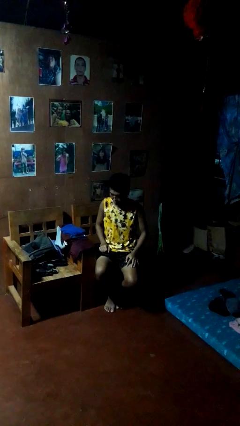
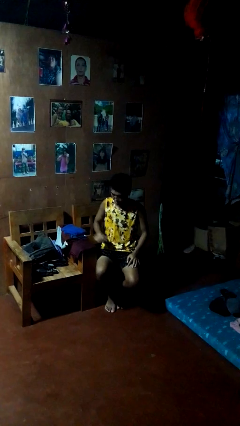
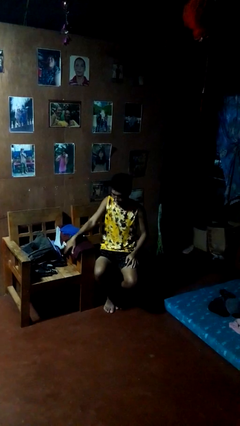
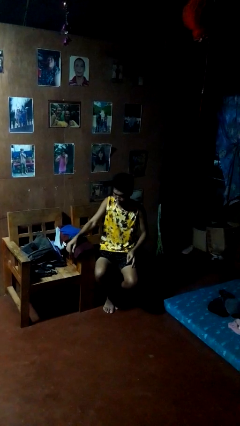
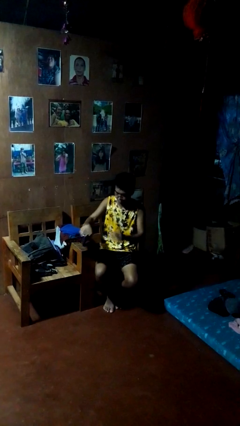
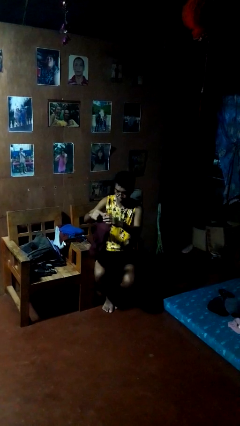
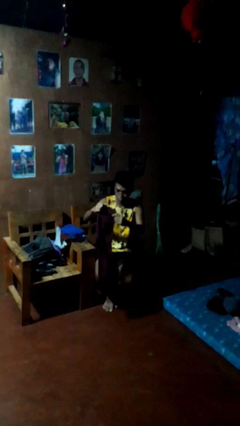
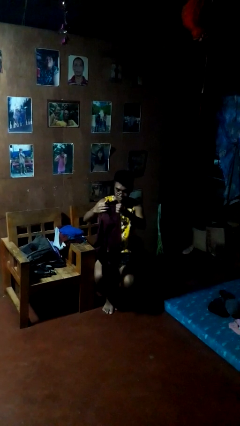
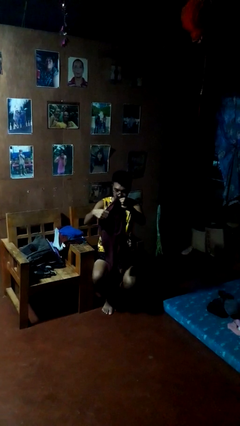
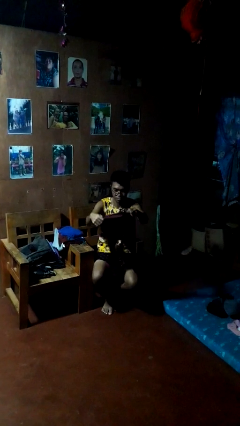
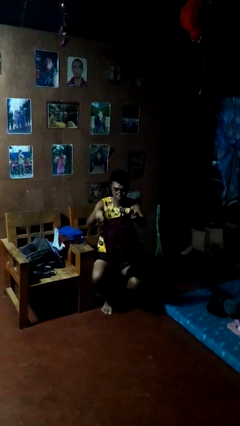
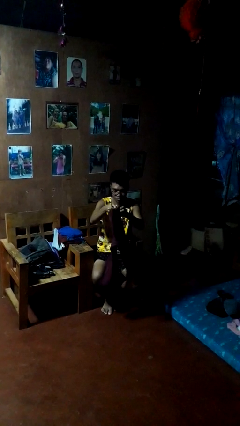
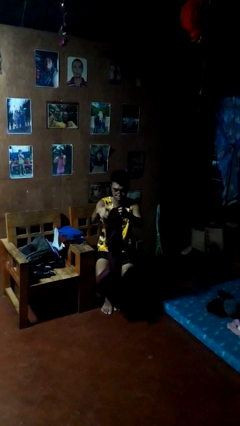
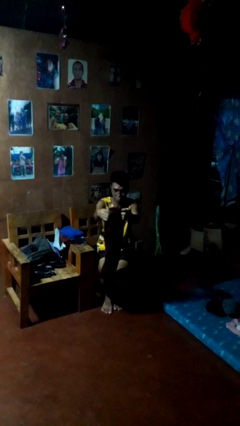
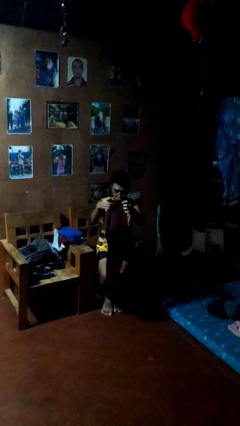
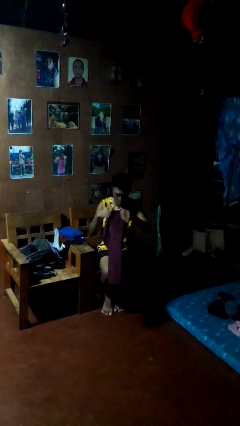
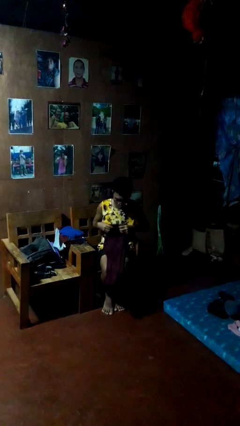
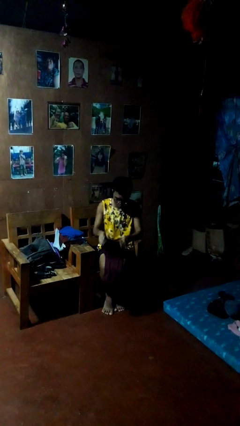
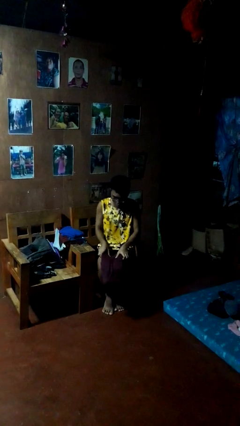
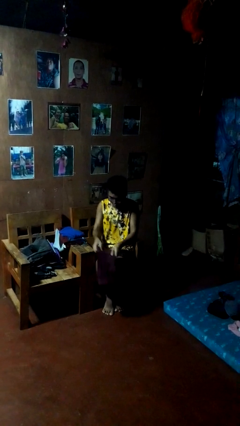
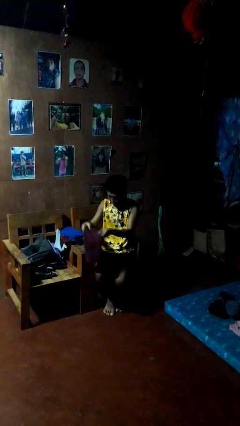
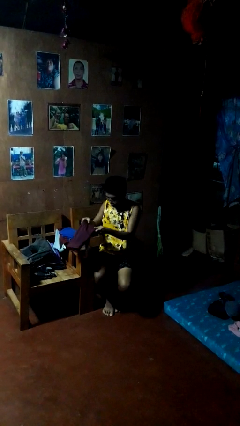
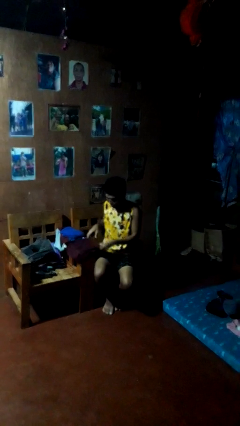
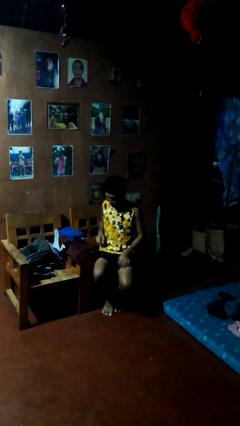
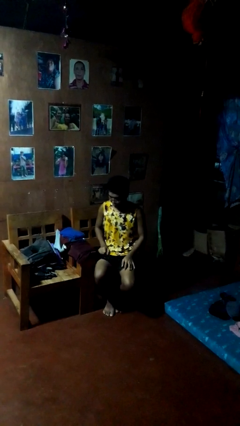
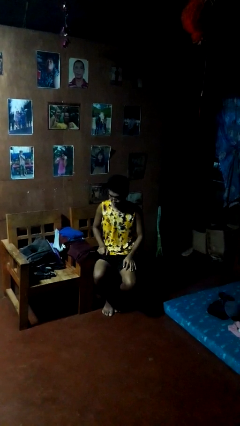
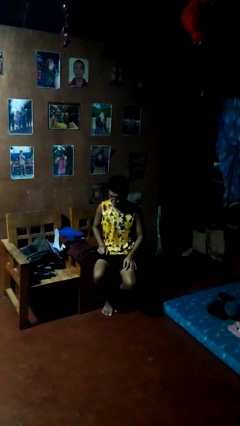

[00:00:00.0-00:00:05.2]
person folds pants

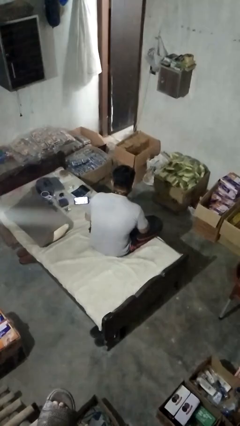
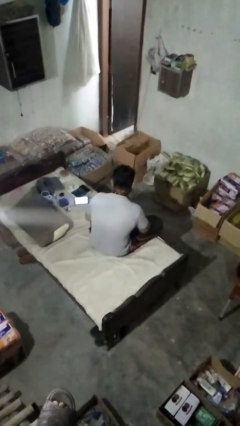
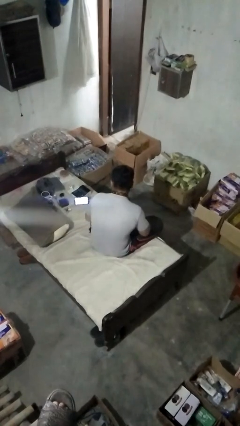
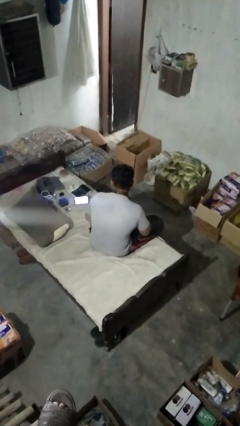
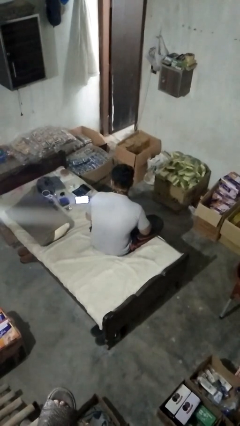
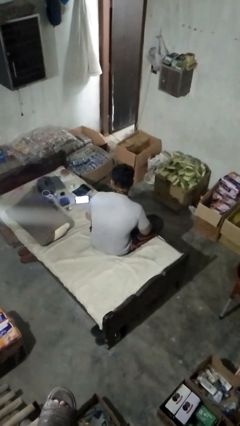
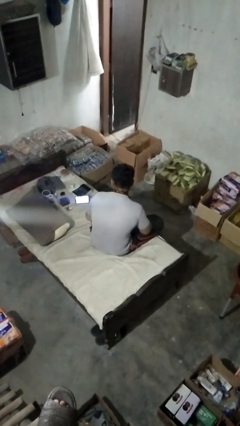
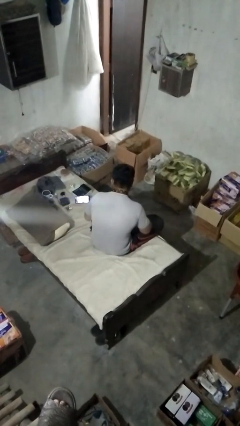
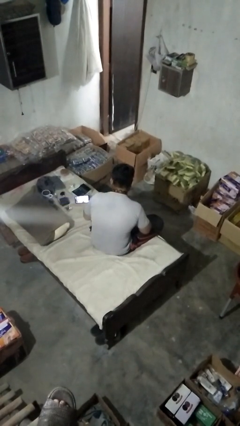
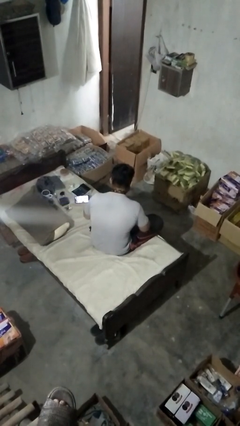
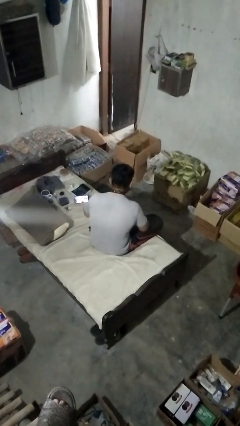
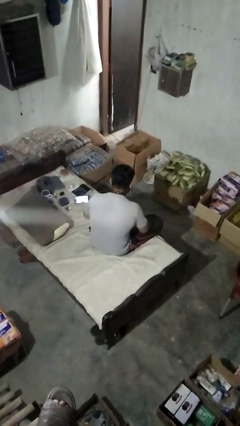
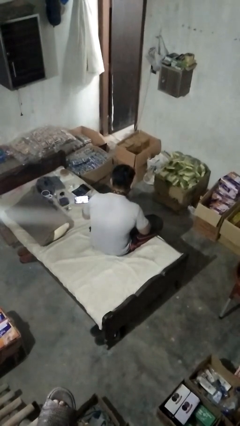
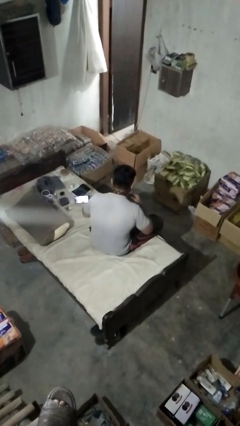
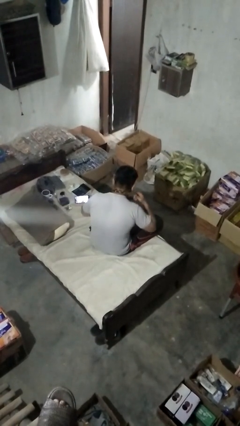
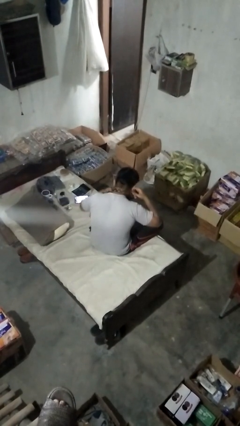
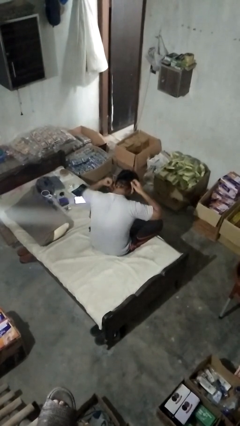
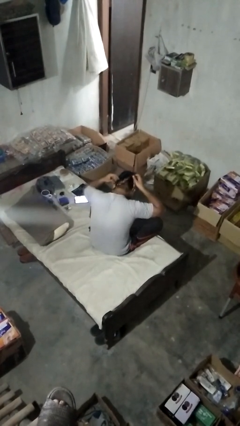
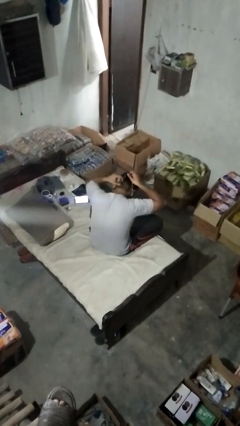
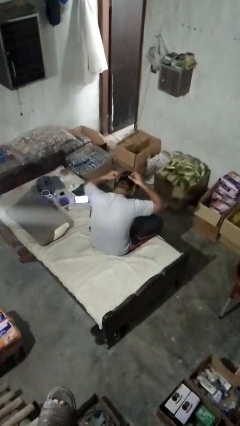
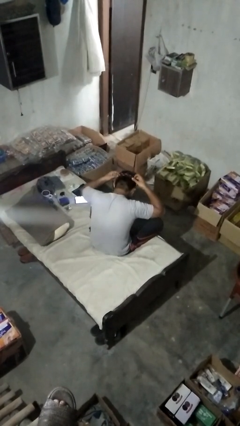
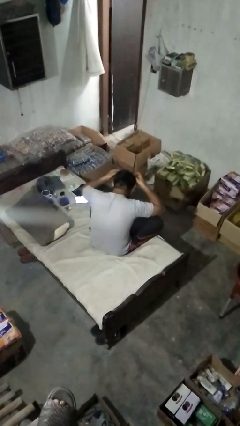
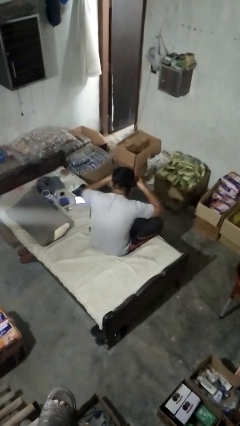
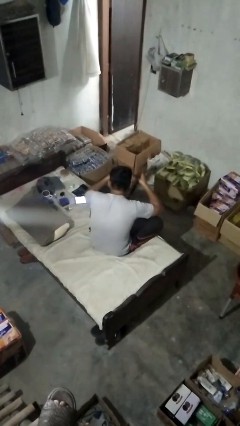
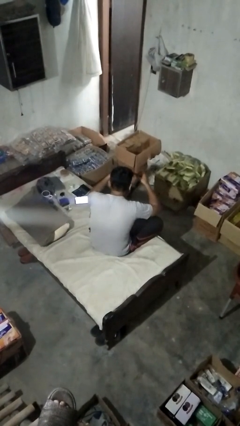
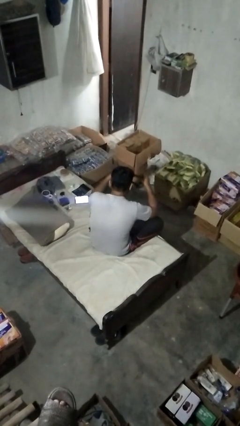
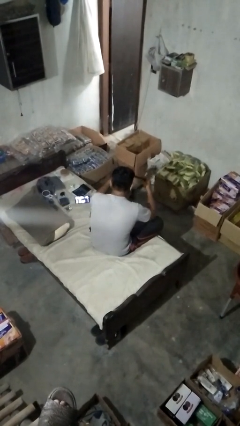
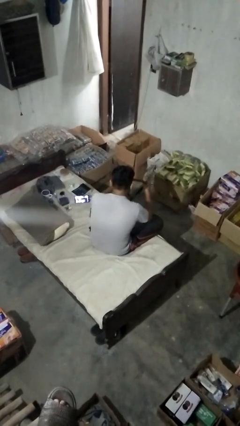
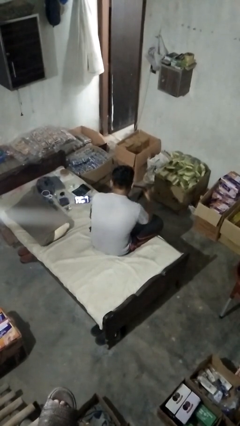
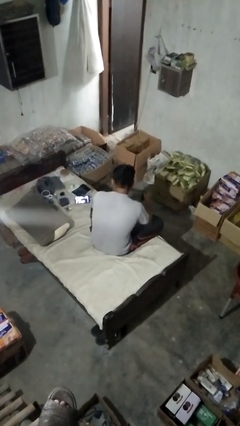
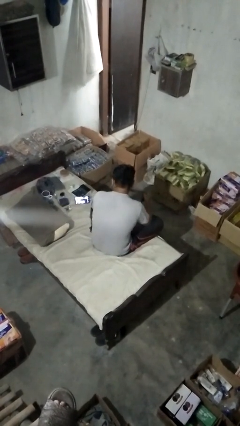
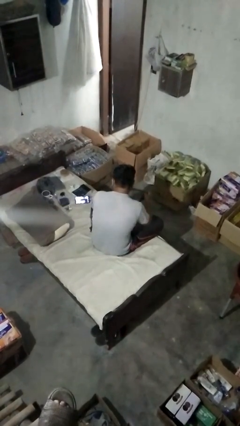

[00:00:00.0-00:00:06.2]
person takes off necktie

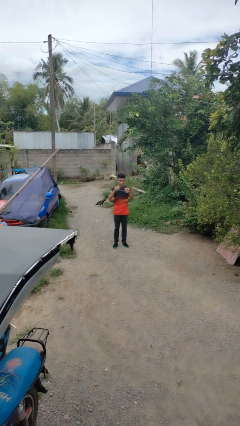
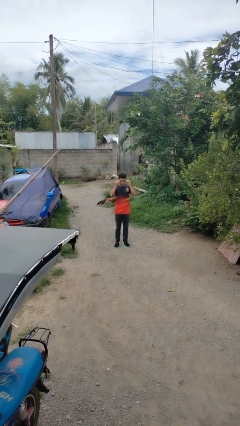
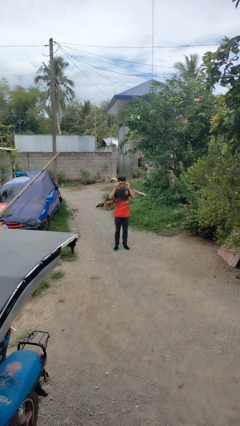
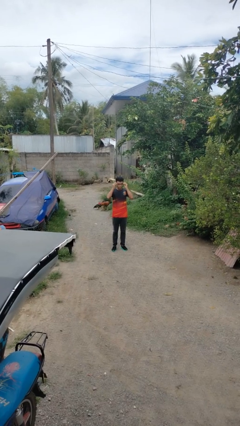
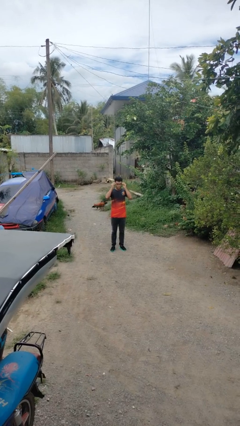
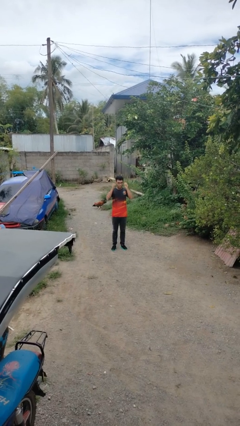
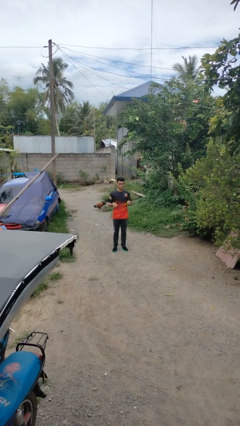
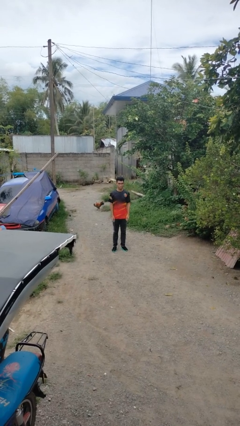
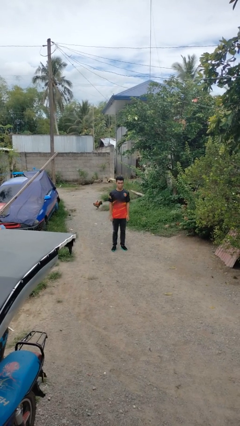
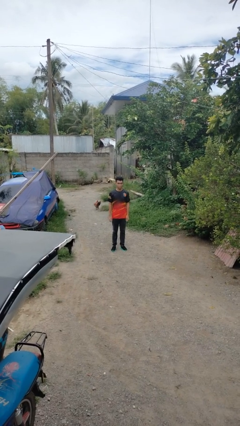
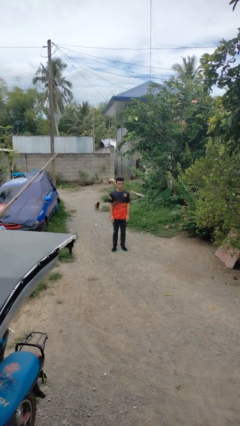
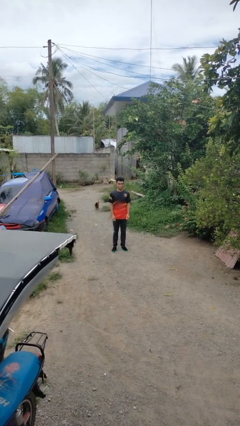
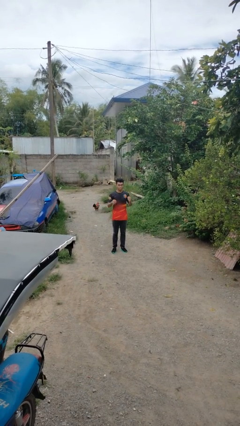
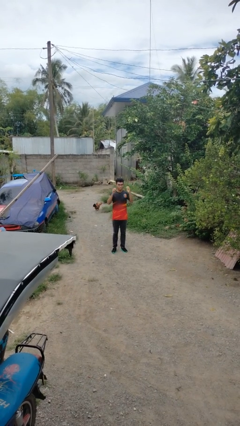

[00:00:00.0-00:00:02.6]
person puts on glasses

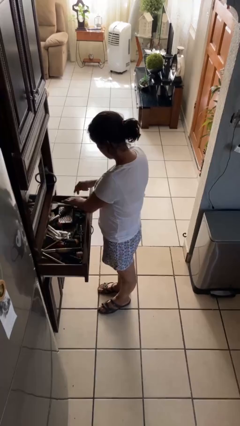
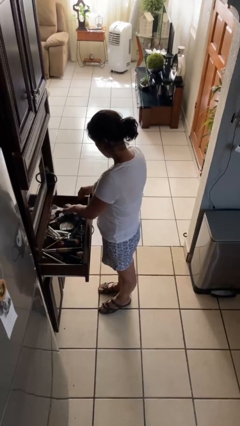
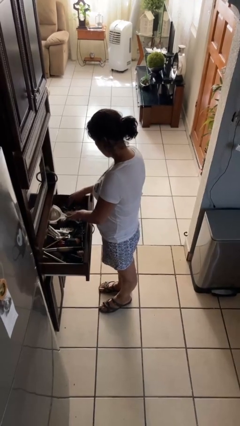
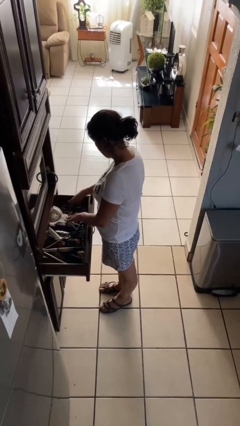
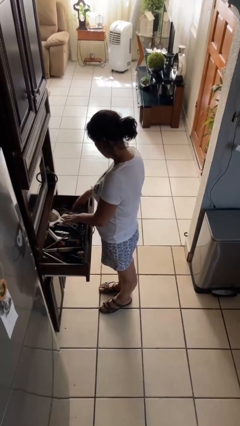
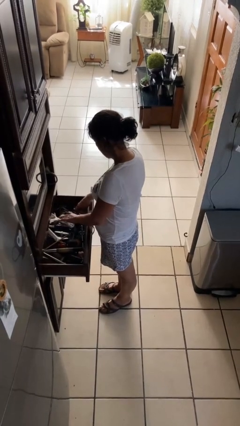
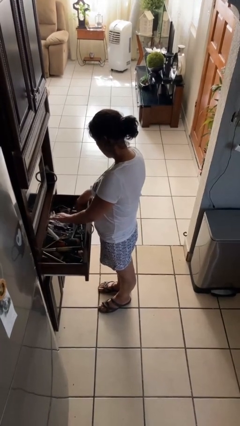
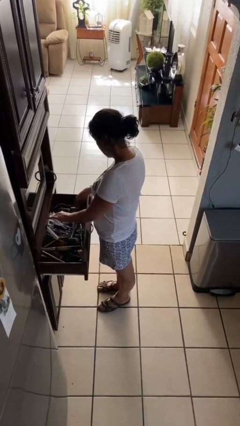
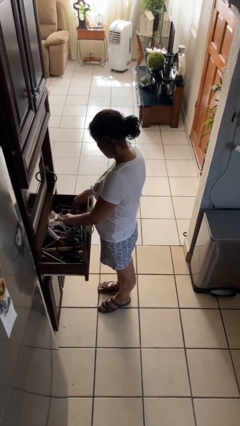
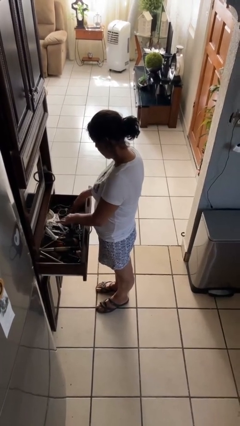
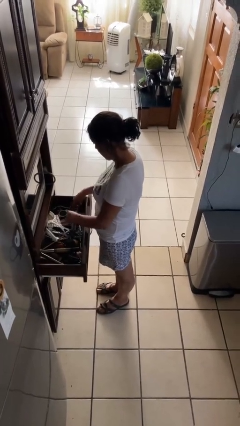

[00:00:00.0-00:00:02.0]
person searches in kitchen drawer

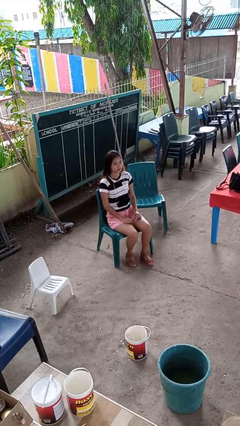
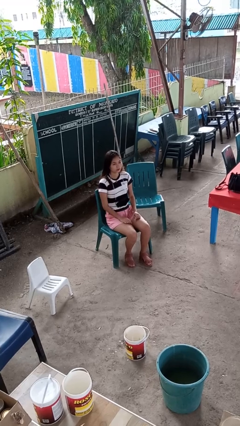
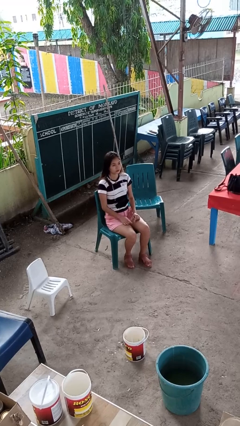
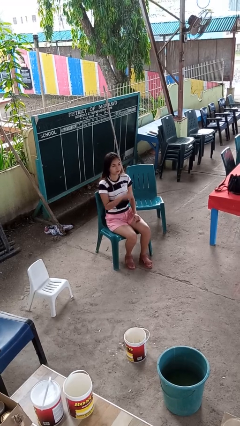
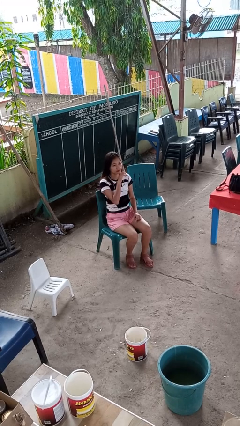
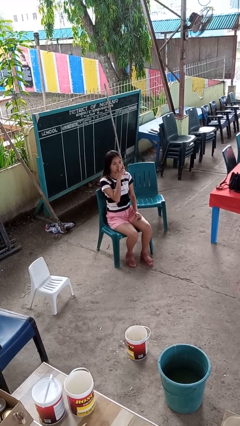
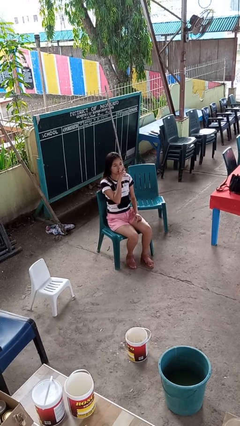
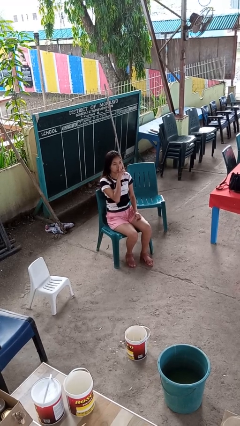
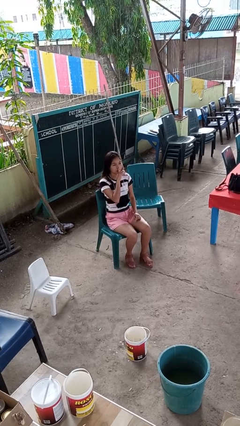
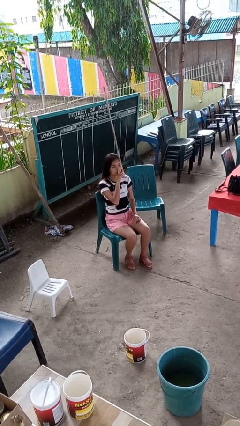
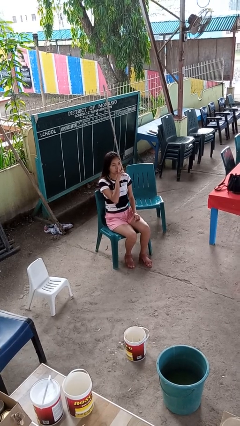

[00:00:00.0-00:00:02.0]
person gestures be quiet
